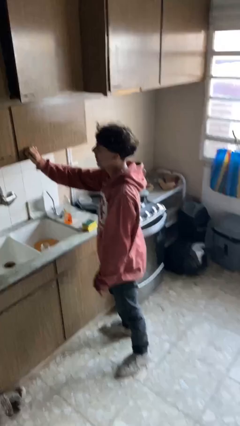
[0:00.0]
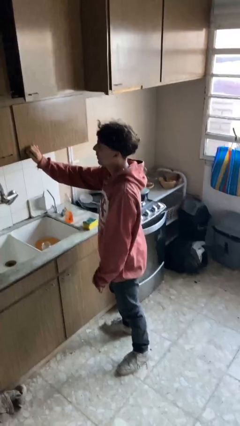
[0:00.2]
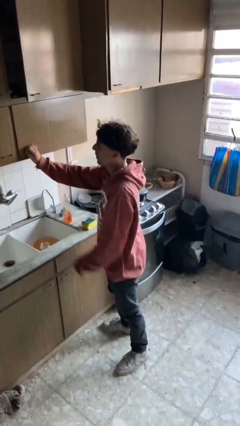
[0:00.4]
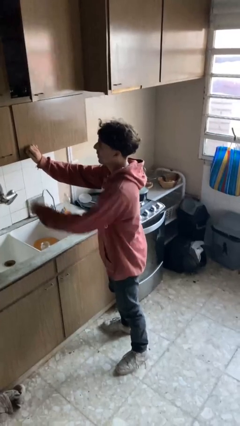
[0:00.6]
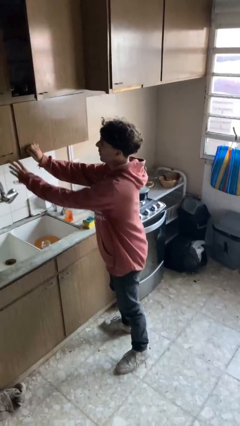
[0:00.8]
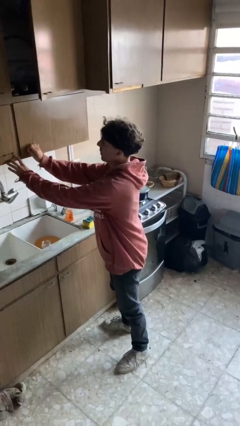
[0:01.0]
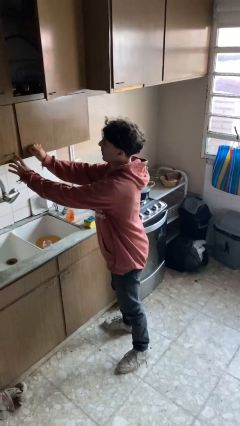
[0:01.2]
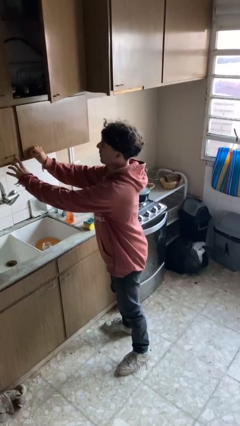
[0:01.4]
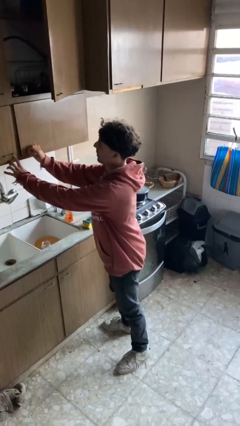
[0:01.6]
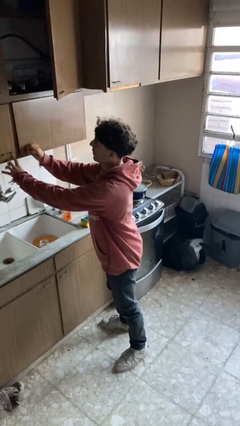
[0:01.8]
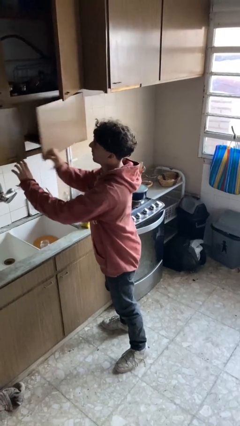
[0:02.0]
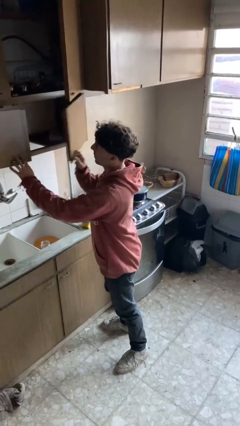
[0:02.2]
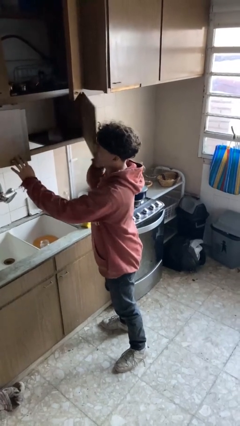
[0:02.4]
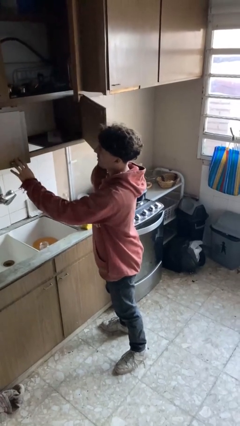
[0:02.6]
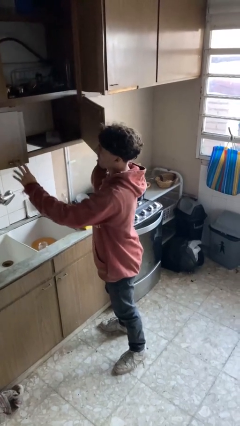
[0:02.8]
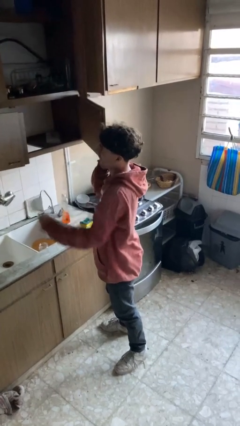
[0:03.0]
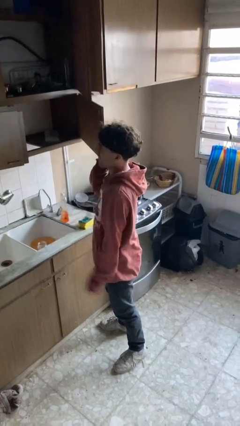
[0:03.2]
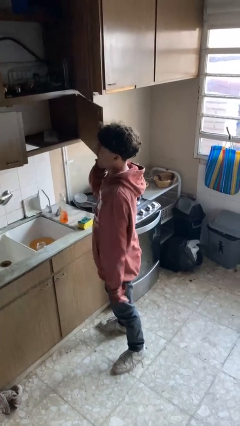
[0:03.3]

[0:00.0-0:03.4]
person opens cabinet

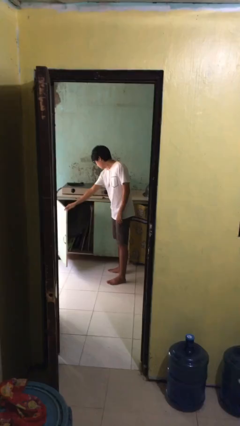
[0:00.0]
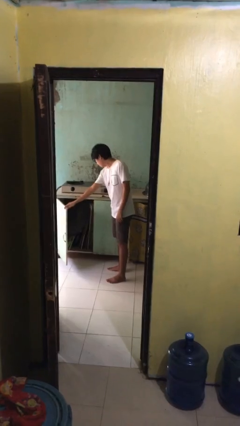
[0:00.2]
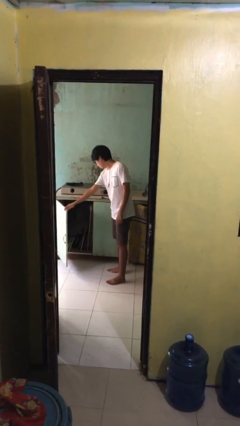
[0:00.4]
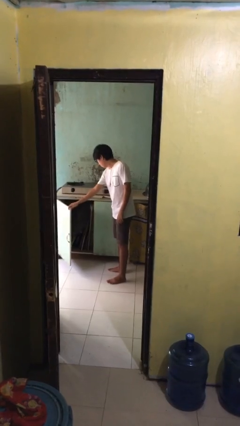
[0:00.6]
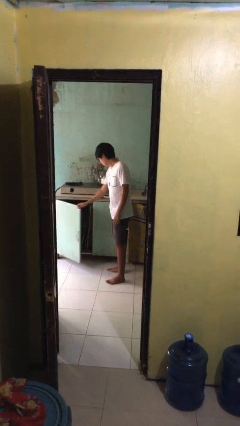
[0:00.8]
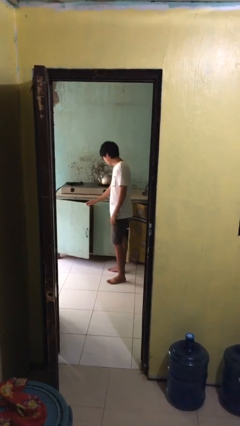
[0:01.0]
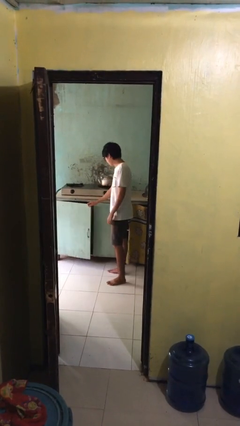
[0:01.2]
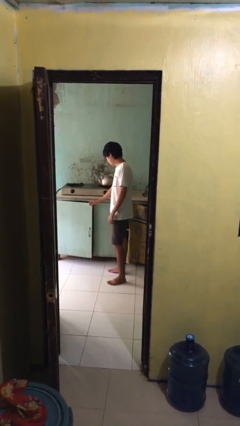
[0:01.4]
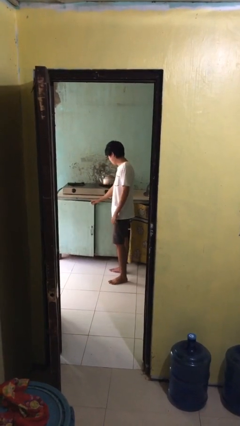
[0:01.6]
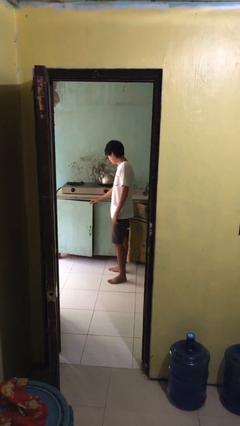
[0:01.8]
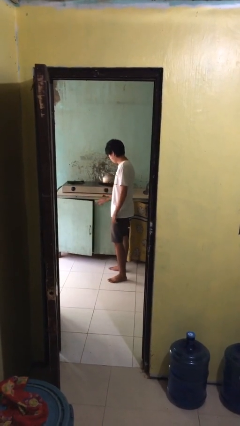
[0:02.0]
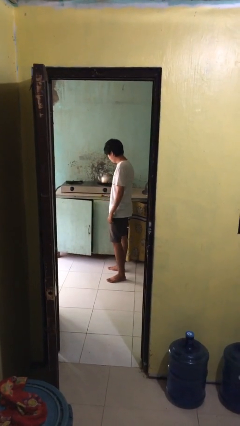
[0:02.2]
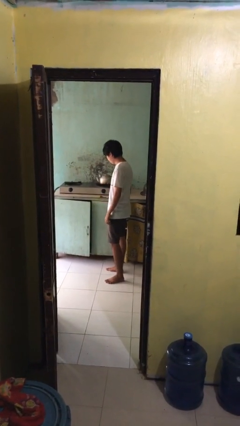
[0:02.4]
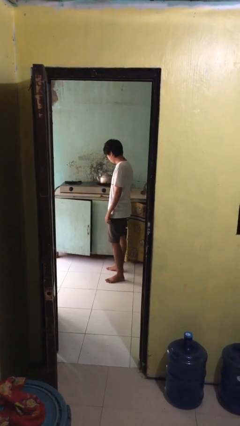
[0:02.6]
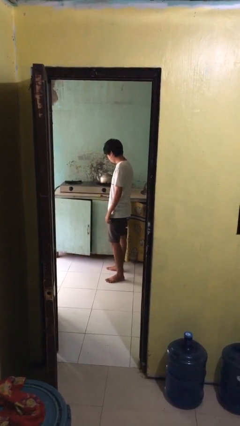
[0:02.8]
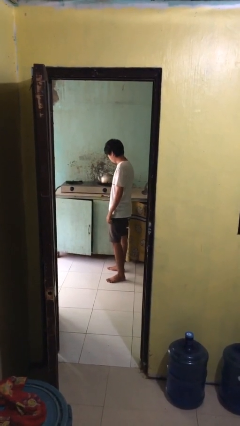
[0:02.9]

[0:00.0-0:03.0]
person closes cabinet

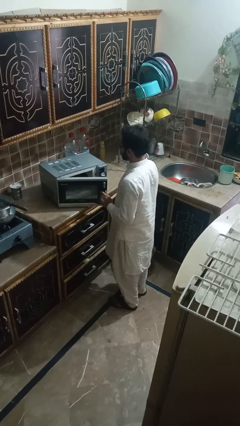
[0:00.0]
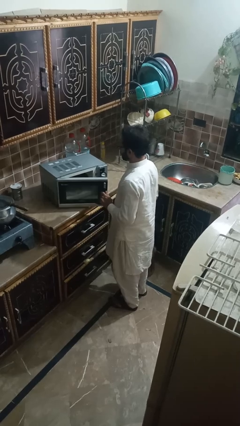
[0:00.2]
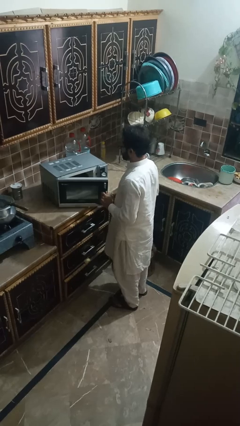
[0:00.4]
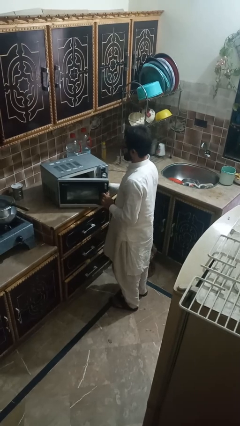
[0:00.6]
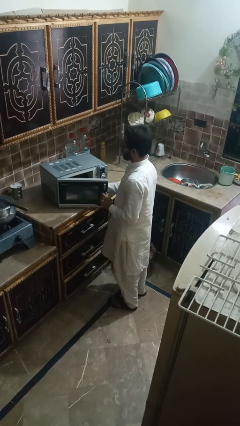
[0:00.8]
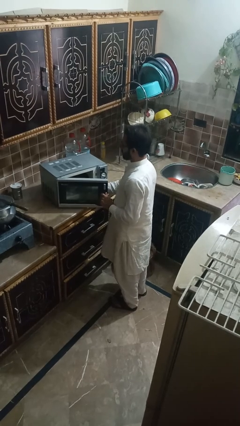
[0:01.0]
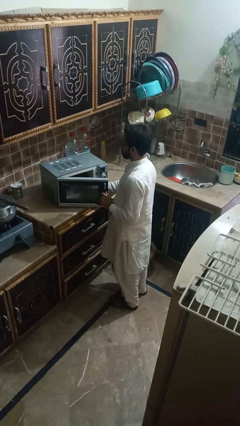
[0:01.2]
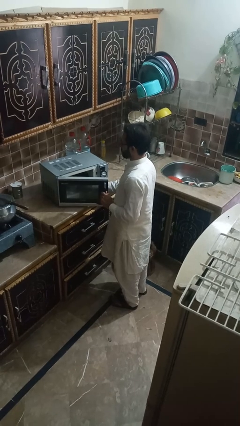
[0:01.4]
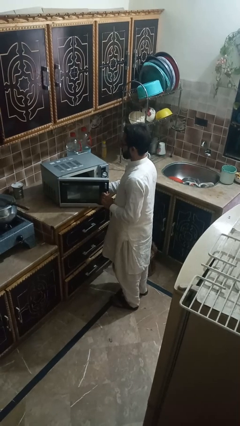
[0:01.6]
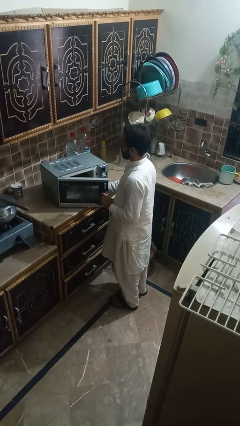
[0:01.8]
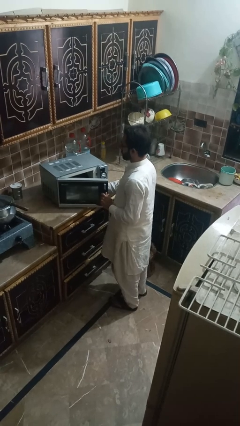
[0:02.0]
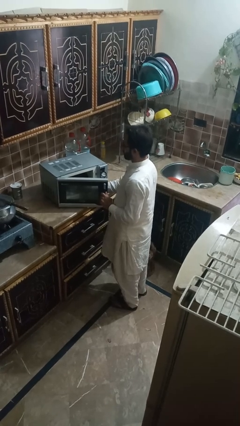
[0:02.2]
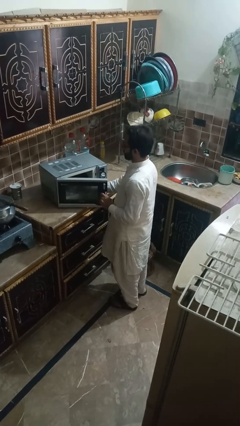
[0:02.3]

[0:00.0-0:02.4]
person puts object into microwave

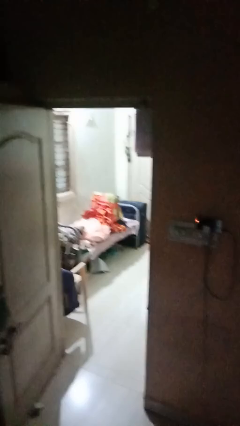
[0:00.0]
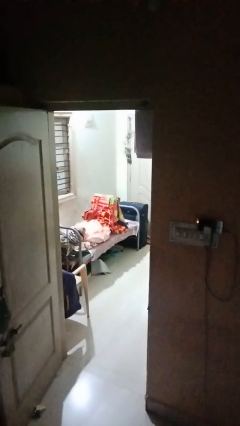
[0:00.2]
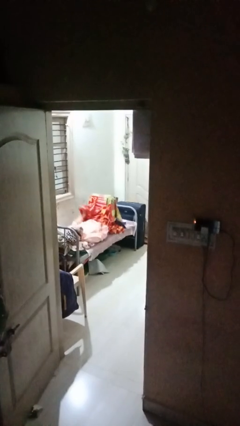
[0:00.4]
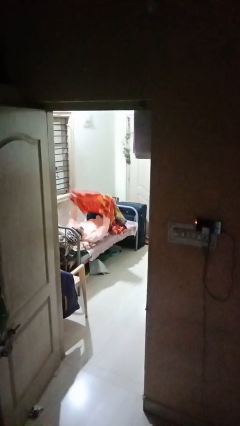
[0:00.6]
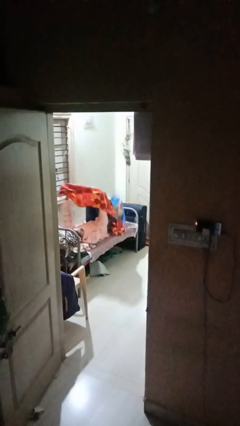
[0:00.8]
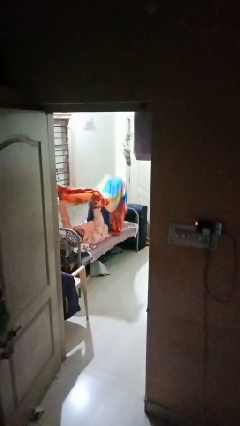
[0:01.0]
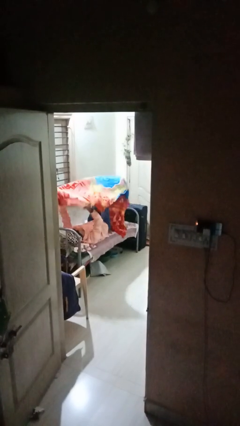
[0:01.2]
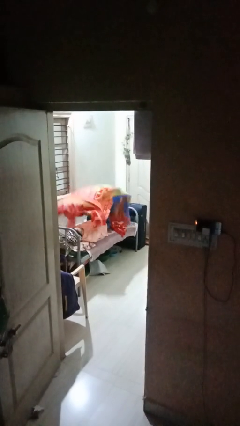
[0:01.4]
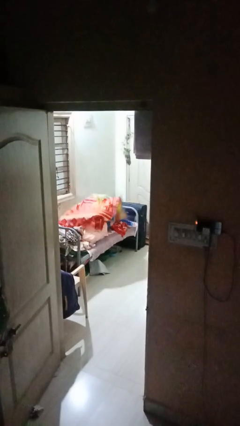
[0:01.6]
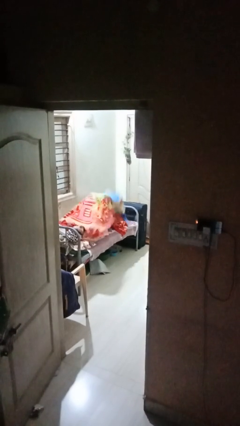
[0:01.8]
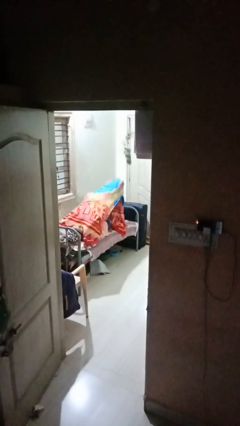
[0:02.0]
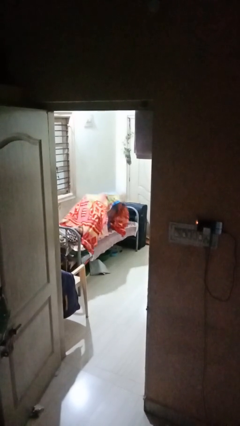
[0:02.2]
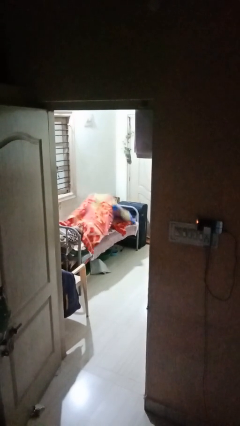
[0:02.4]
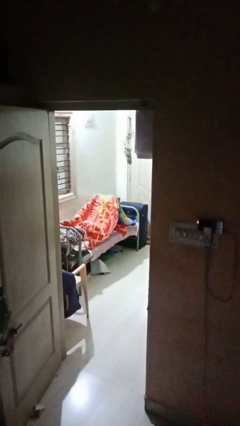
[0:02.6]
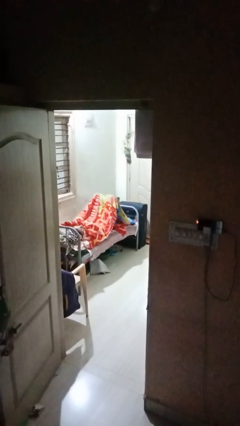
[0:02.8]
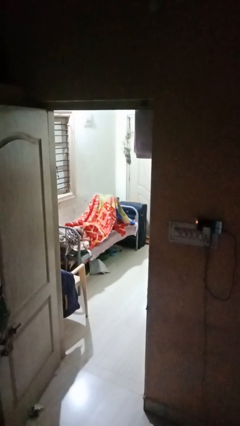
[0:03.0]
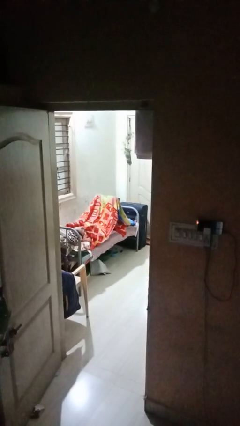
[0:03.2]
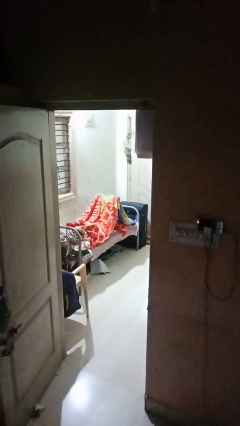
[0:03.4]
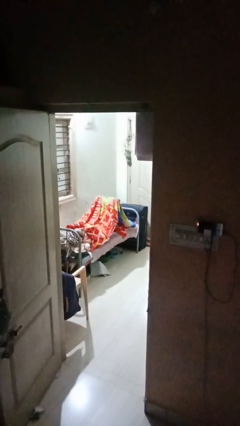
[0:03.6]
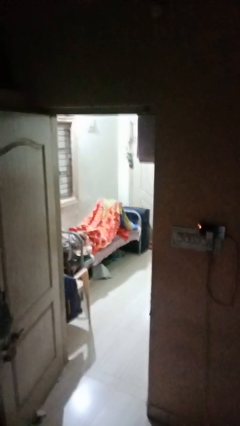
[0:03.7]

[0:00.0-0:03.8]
person covers with bedsheets

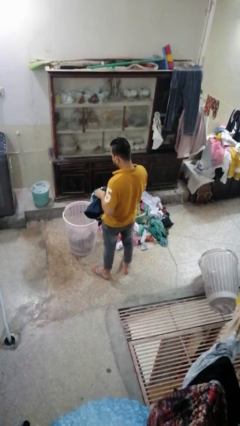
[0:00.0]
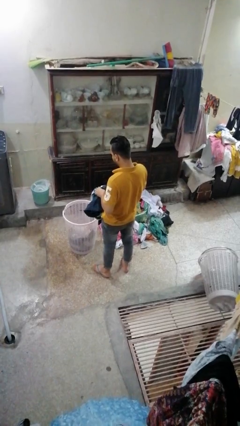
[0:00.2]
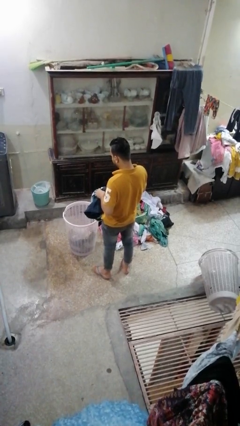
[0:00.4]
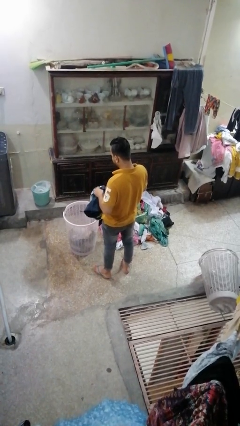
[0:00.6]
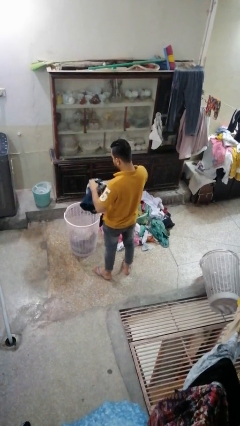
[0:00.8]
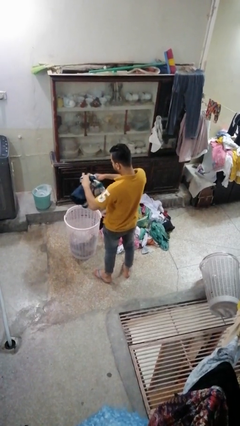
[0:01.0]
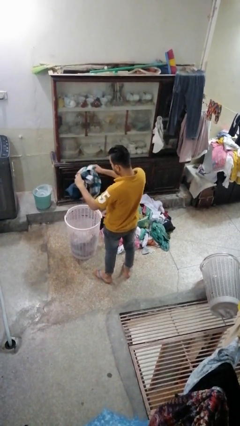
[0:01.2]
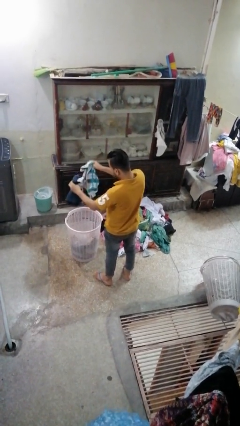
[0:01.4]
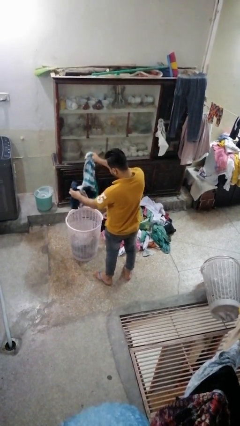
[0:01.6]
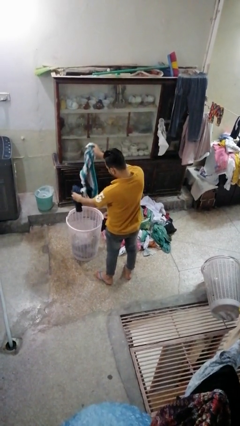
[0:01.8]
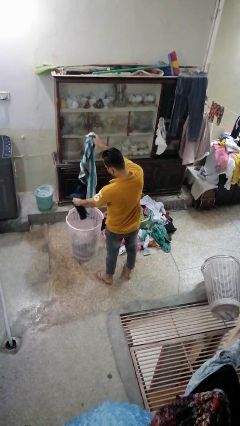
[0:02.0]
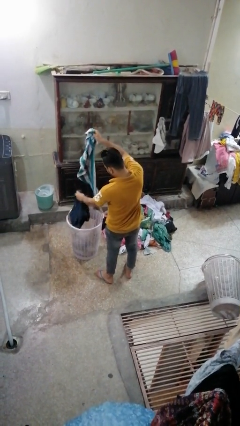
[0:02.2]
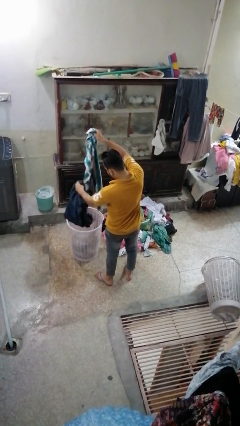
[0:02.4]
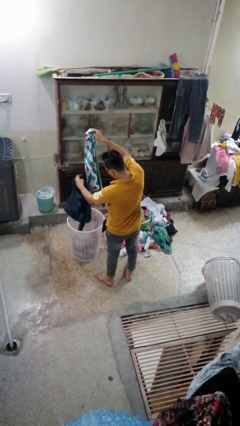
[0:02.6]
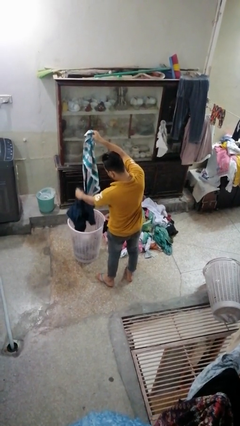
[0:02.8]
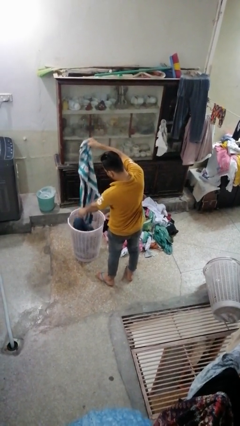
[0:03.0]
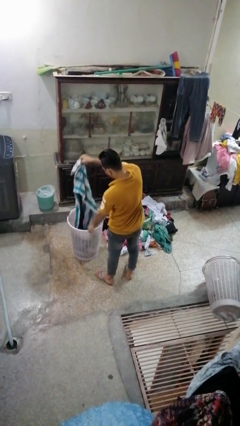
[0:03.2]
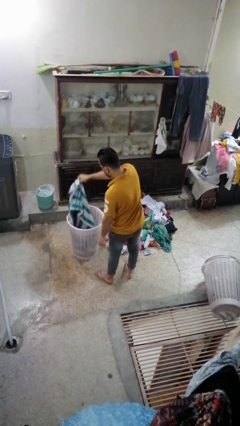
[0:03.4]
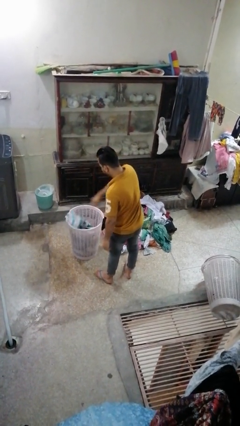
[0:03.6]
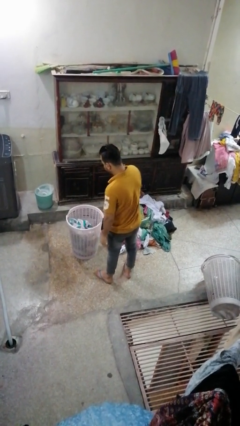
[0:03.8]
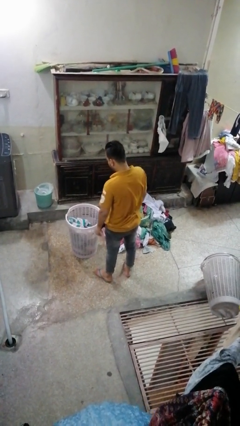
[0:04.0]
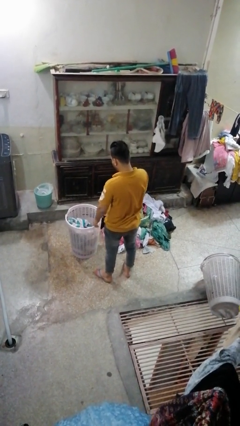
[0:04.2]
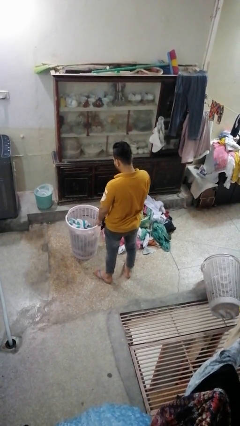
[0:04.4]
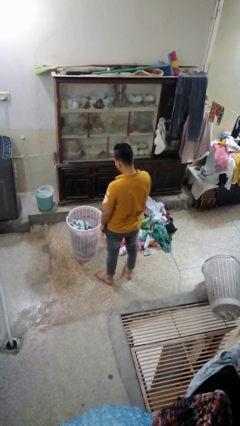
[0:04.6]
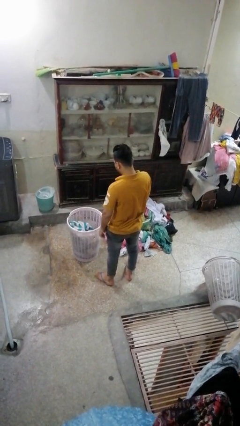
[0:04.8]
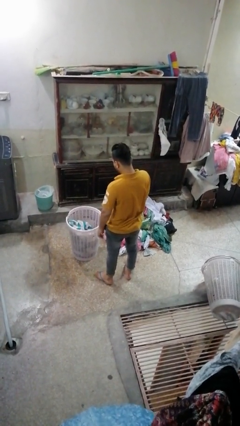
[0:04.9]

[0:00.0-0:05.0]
person puts object into basket
